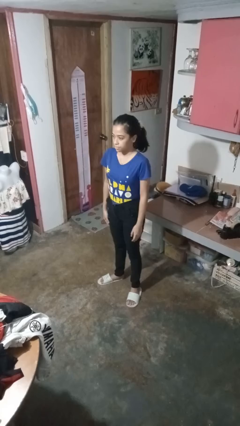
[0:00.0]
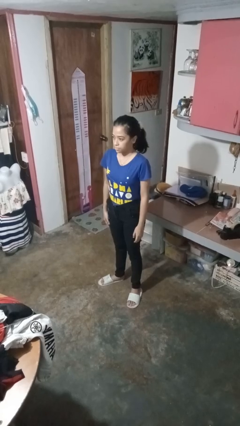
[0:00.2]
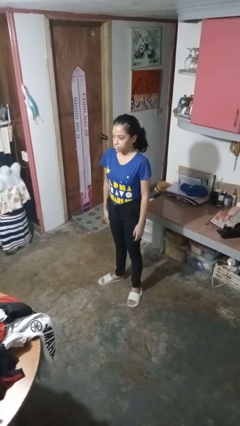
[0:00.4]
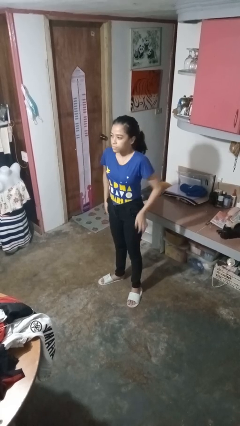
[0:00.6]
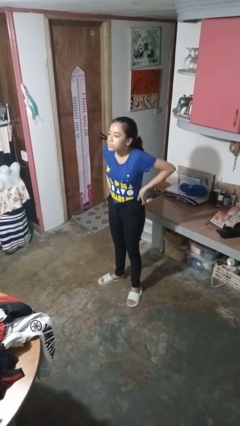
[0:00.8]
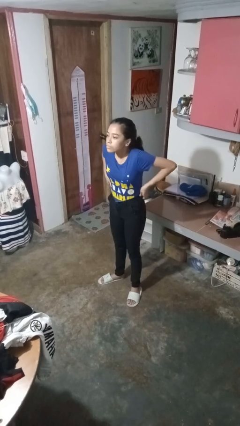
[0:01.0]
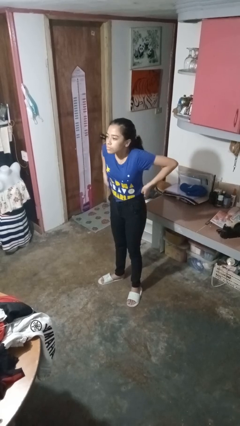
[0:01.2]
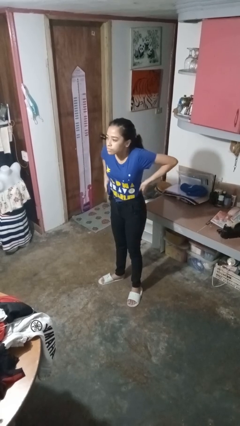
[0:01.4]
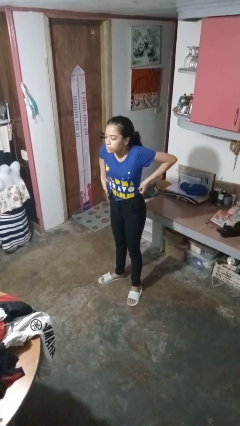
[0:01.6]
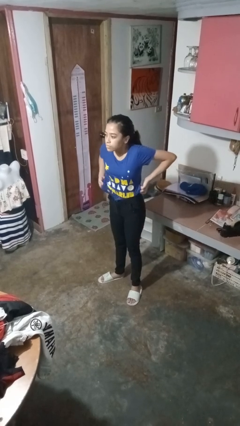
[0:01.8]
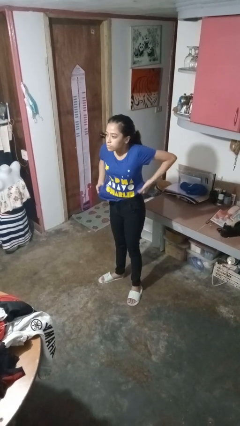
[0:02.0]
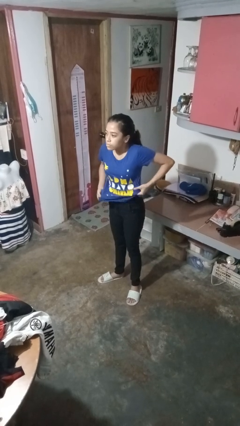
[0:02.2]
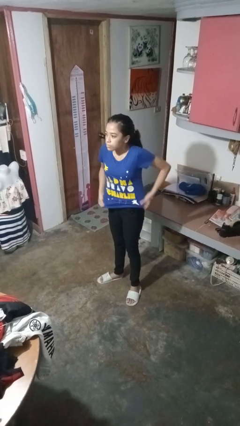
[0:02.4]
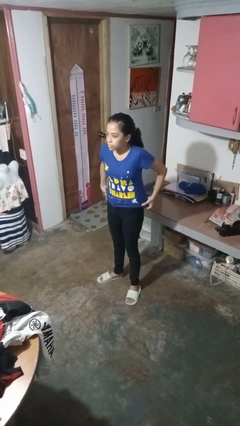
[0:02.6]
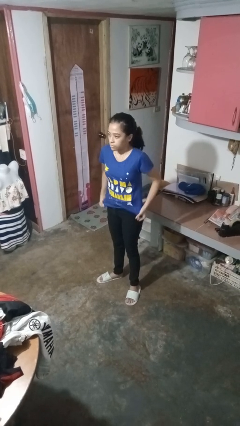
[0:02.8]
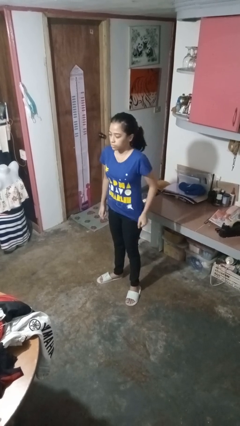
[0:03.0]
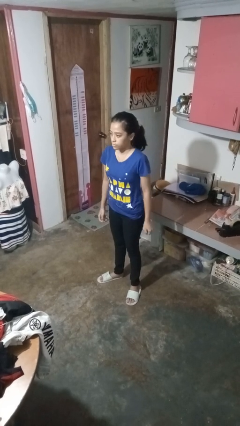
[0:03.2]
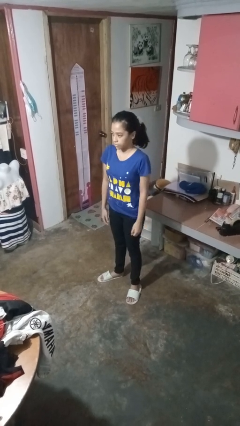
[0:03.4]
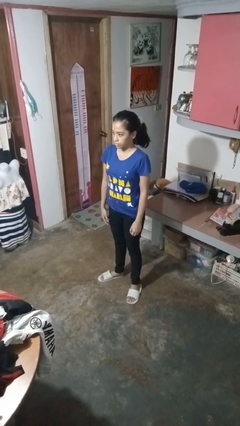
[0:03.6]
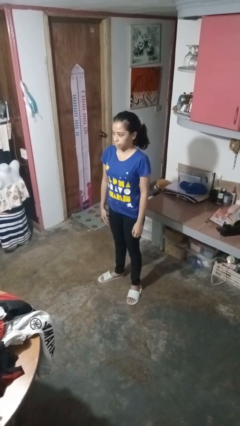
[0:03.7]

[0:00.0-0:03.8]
person untucks shirt

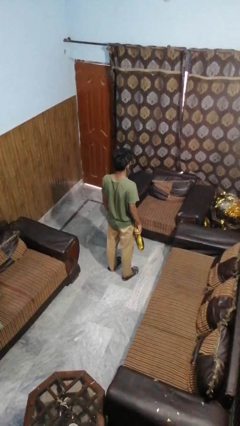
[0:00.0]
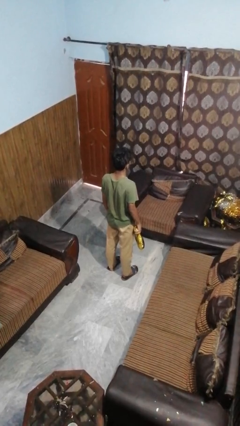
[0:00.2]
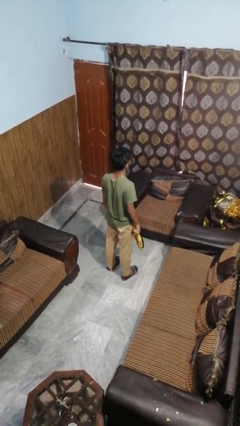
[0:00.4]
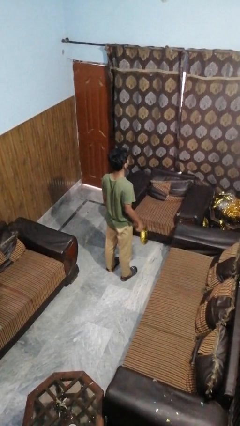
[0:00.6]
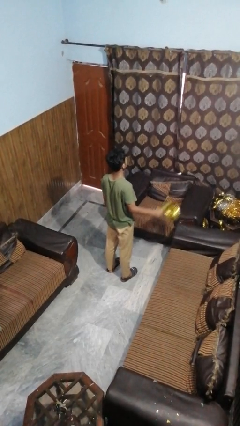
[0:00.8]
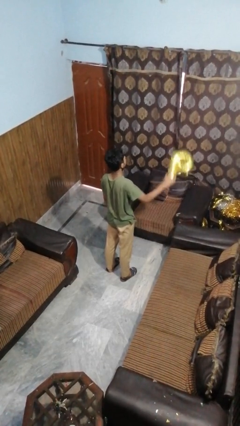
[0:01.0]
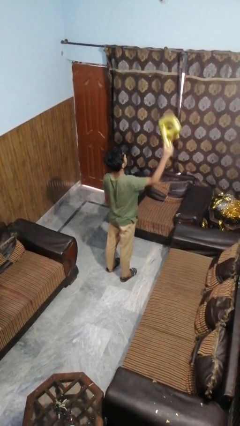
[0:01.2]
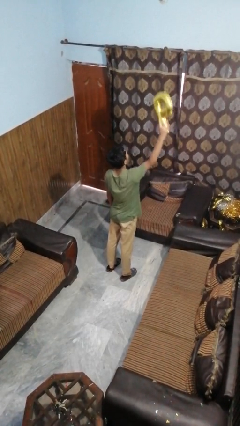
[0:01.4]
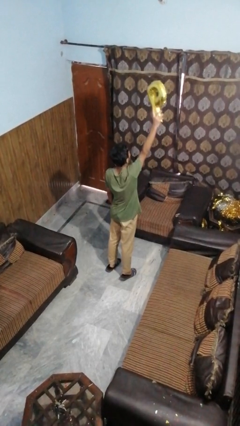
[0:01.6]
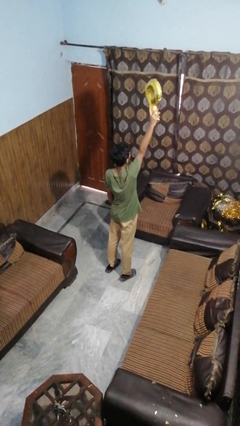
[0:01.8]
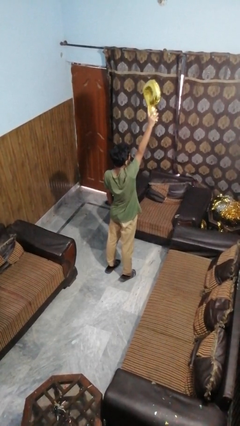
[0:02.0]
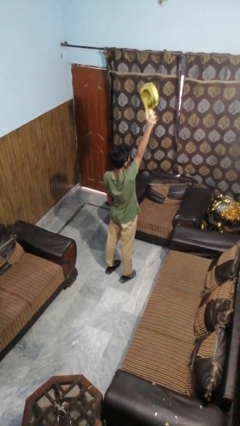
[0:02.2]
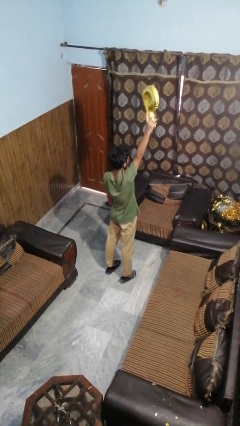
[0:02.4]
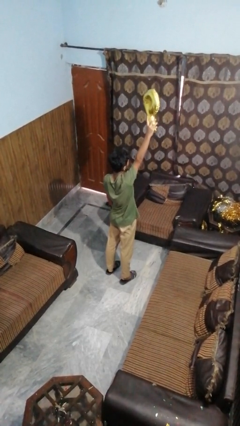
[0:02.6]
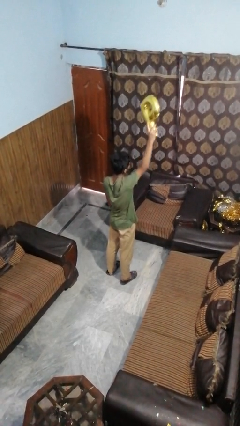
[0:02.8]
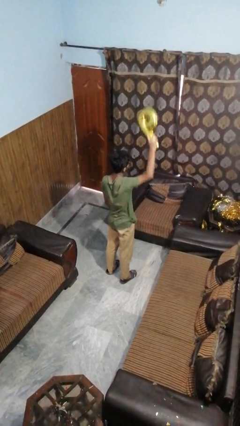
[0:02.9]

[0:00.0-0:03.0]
person holds object above head

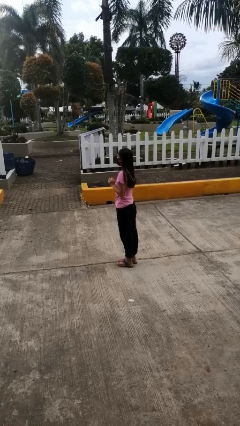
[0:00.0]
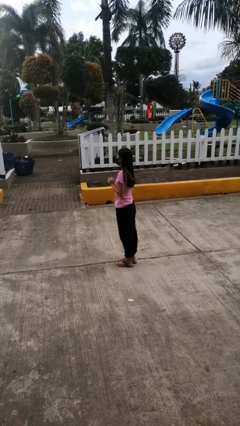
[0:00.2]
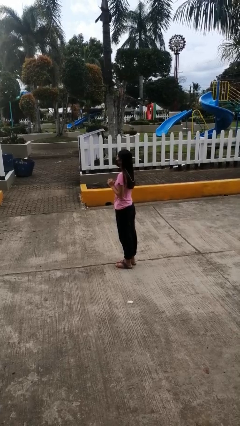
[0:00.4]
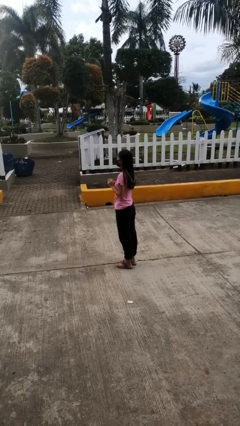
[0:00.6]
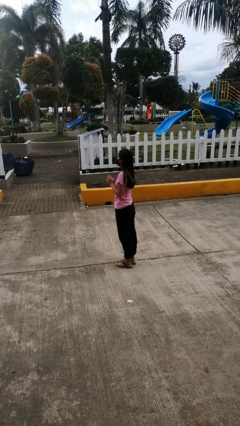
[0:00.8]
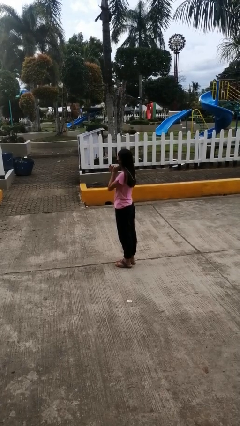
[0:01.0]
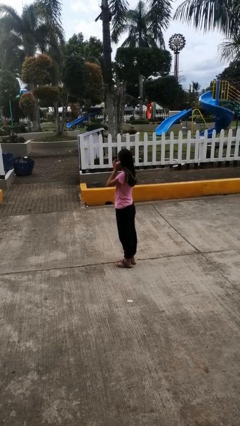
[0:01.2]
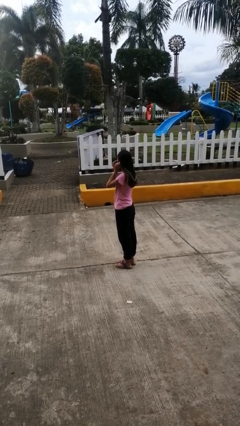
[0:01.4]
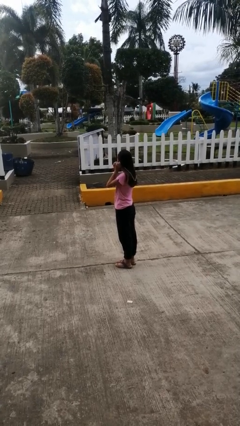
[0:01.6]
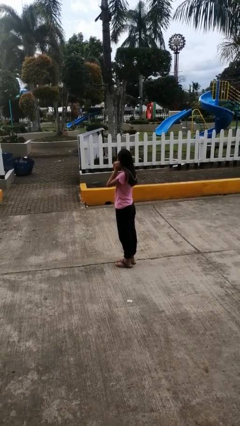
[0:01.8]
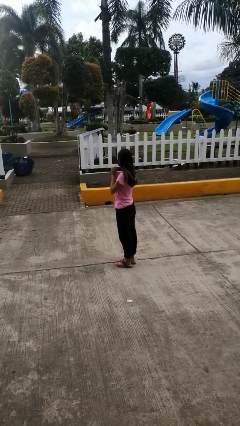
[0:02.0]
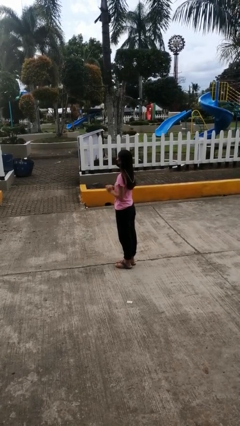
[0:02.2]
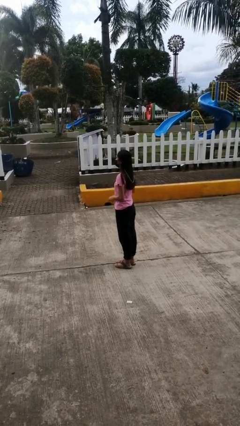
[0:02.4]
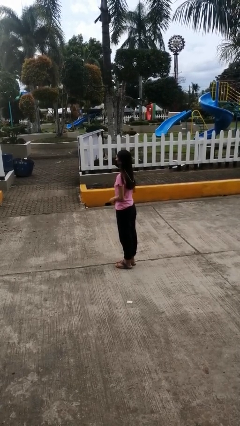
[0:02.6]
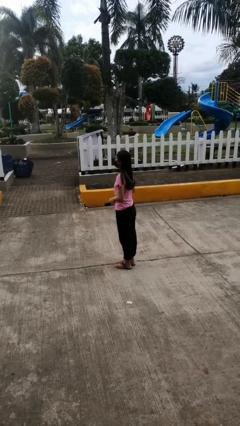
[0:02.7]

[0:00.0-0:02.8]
person takes off earrings

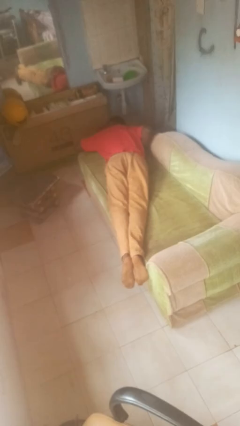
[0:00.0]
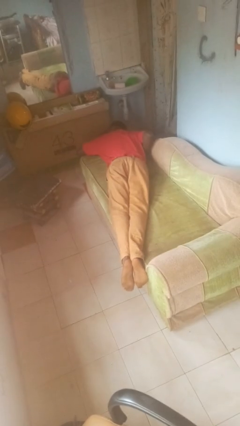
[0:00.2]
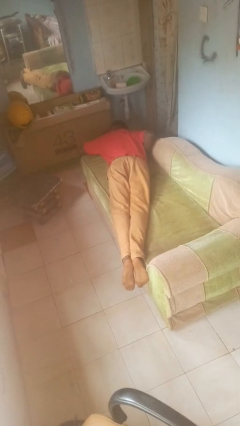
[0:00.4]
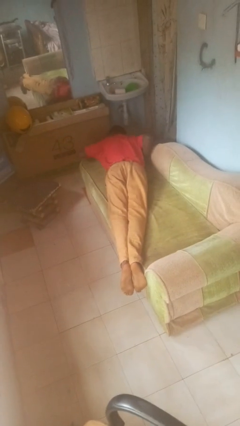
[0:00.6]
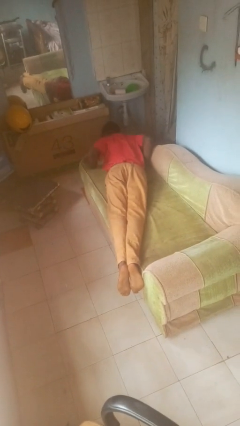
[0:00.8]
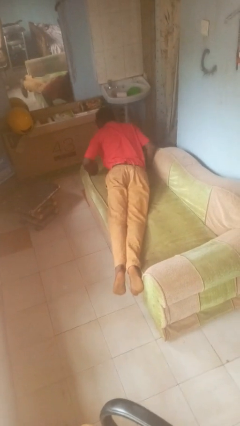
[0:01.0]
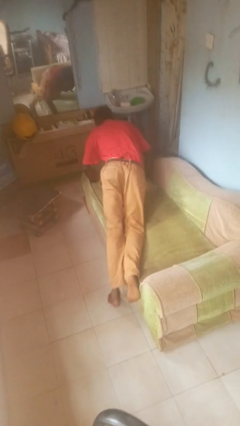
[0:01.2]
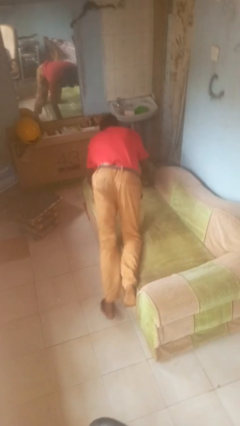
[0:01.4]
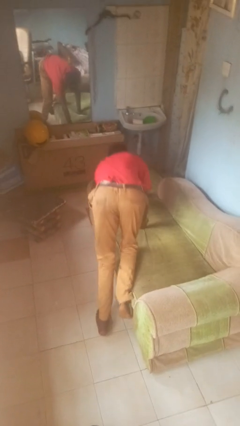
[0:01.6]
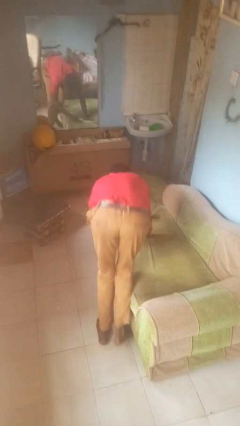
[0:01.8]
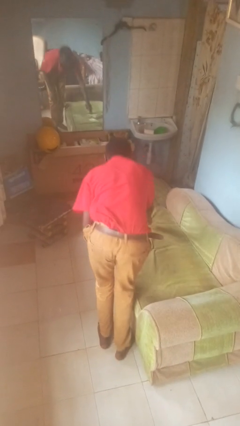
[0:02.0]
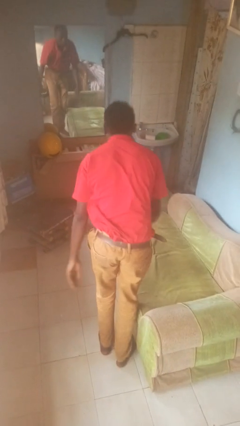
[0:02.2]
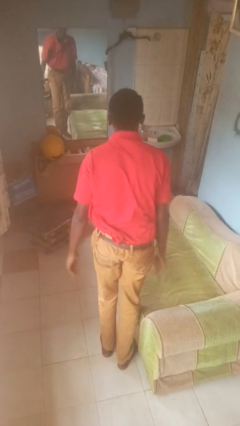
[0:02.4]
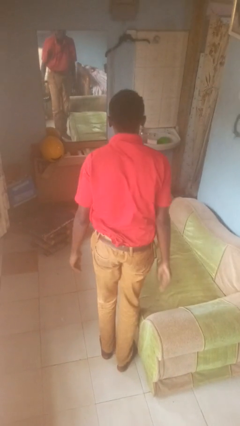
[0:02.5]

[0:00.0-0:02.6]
person stands up

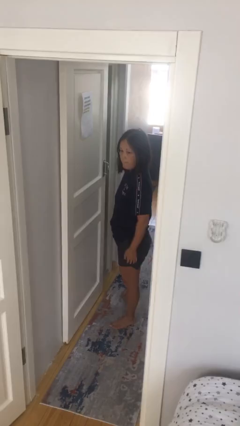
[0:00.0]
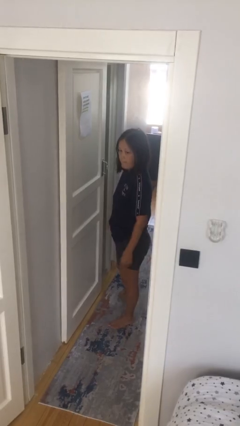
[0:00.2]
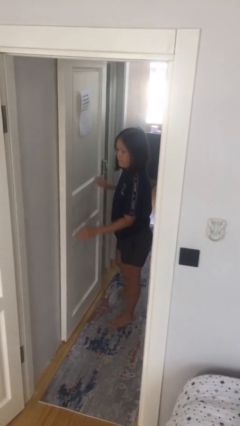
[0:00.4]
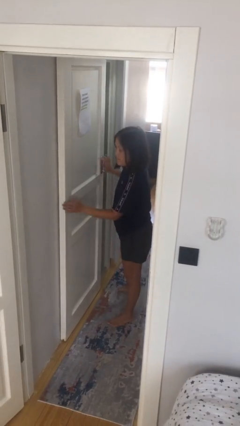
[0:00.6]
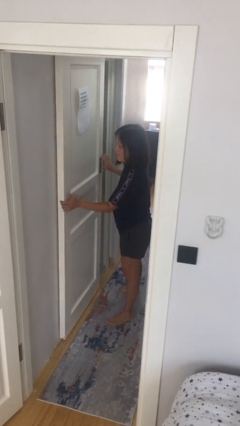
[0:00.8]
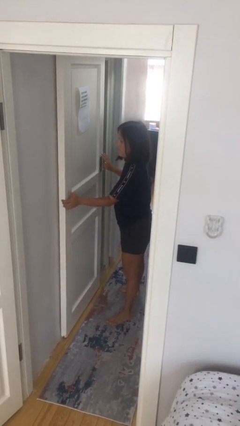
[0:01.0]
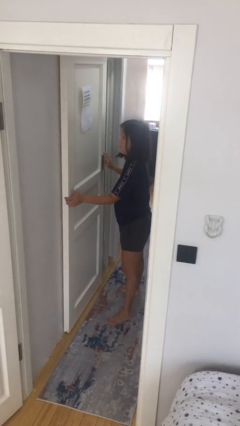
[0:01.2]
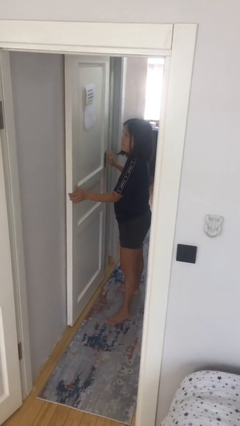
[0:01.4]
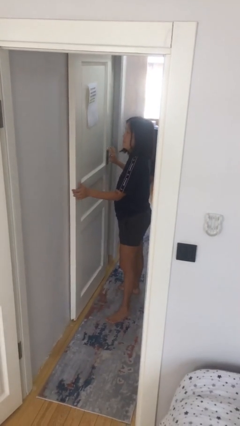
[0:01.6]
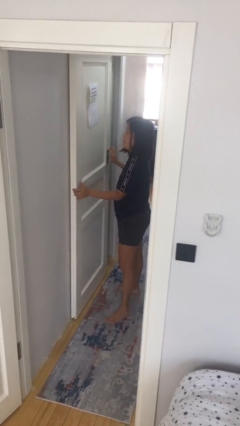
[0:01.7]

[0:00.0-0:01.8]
person closes sliding door

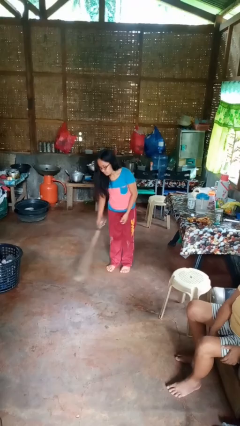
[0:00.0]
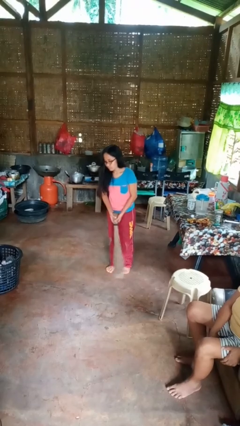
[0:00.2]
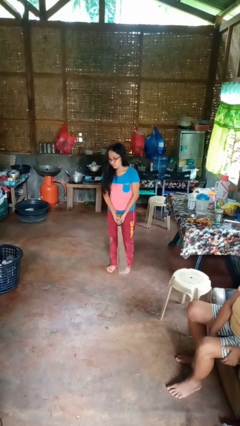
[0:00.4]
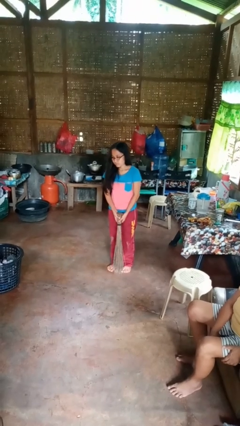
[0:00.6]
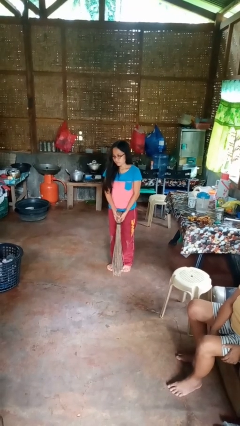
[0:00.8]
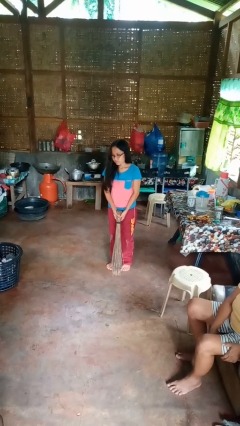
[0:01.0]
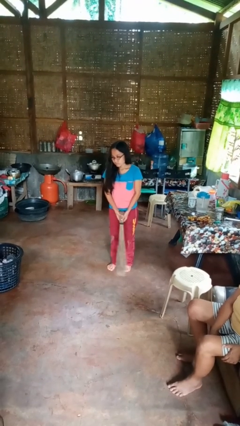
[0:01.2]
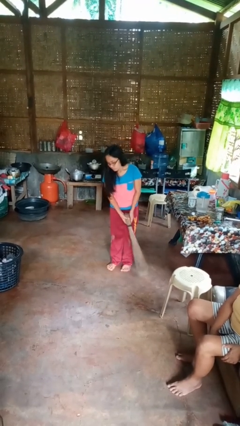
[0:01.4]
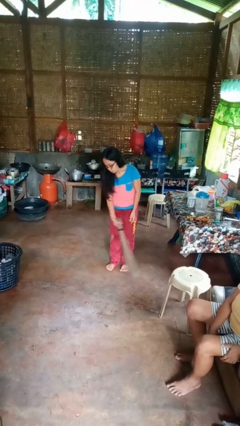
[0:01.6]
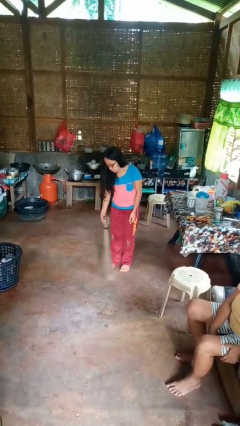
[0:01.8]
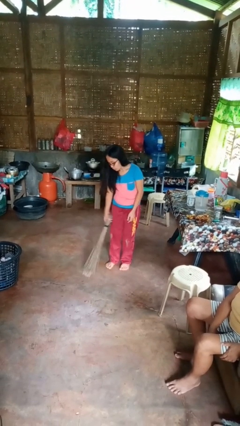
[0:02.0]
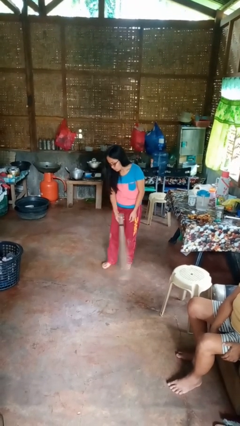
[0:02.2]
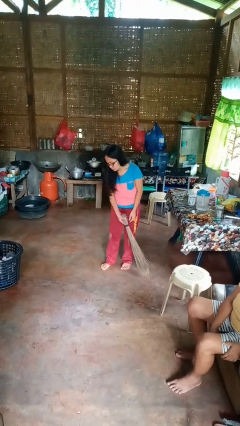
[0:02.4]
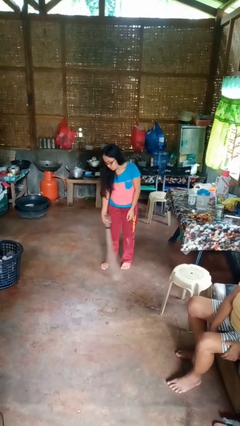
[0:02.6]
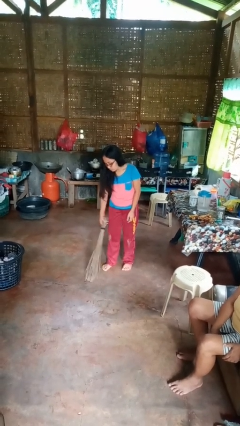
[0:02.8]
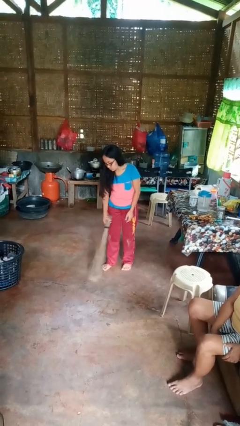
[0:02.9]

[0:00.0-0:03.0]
person sweeps floor

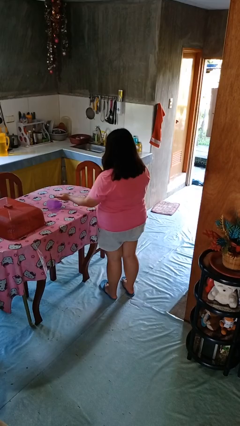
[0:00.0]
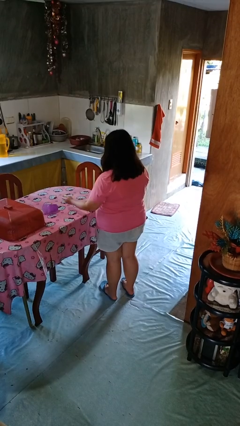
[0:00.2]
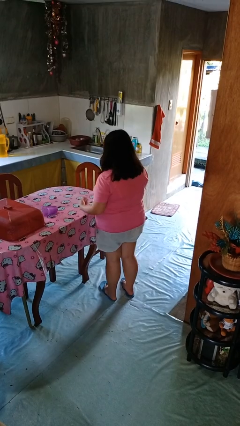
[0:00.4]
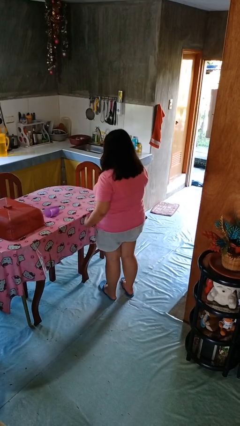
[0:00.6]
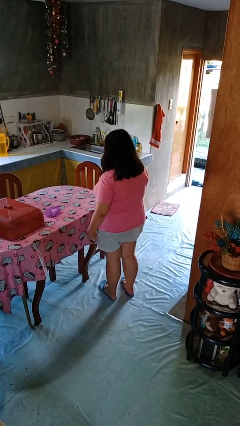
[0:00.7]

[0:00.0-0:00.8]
person knocks over glass
